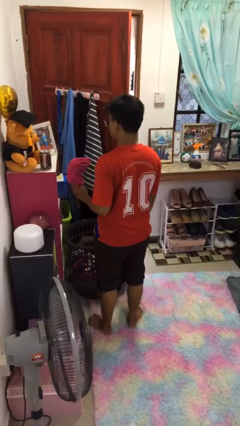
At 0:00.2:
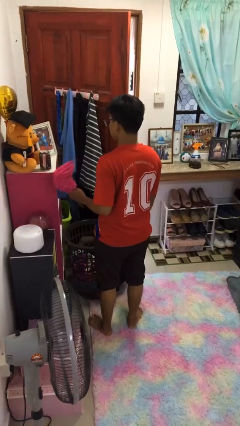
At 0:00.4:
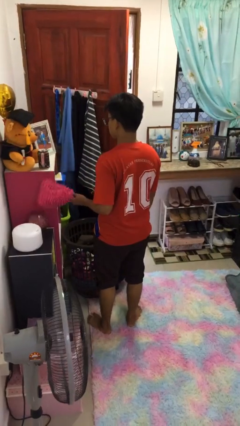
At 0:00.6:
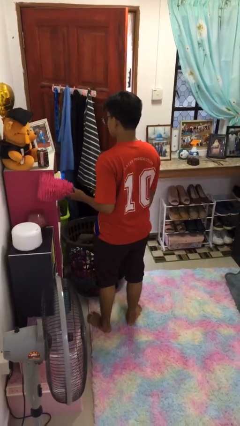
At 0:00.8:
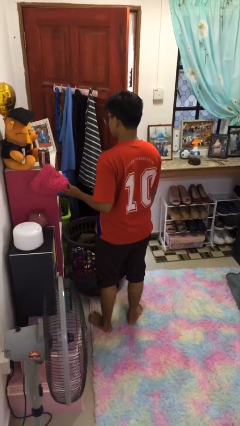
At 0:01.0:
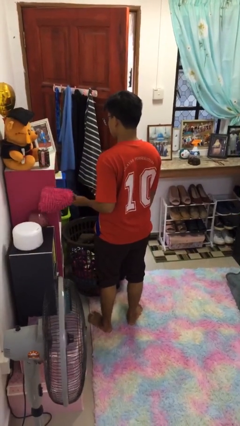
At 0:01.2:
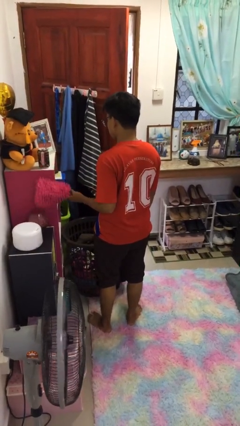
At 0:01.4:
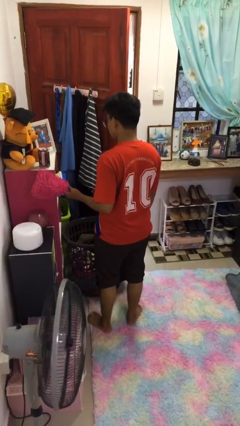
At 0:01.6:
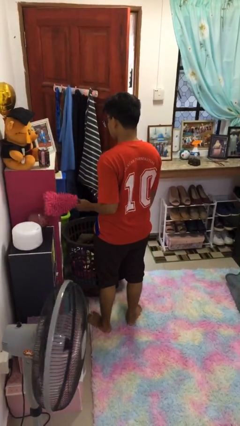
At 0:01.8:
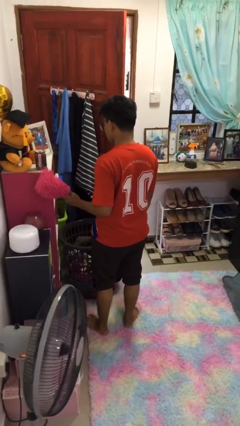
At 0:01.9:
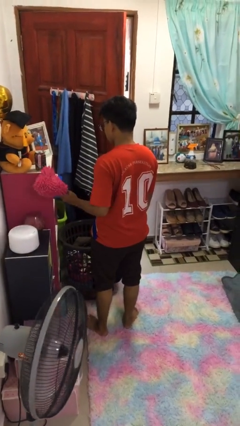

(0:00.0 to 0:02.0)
person dusts furniture

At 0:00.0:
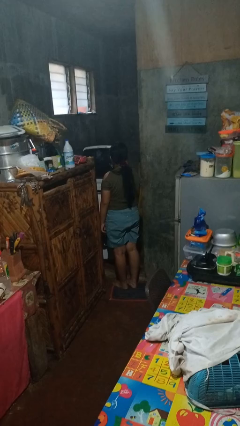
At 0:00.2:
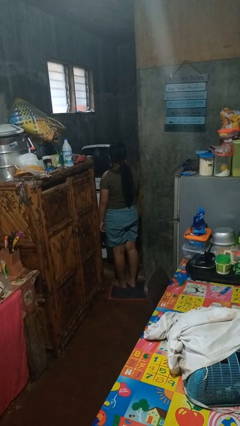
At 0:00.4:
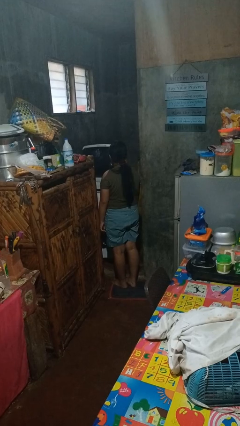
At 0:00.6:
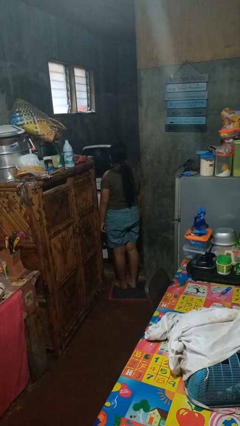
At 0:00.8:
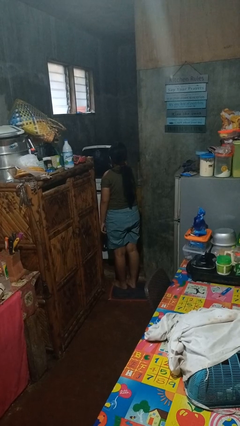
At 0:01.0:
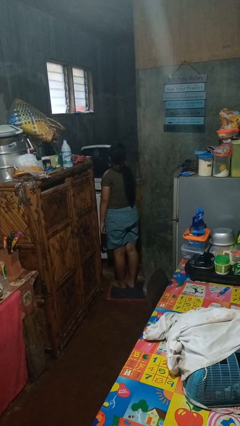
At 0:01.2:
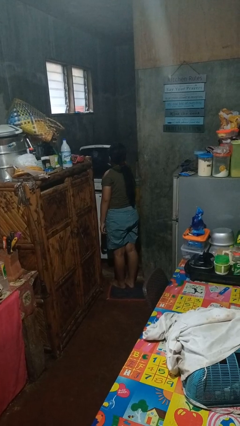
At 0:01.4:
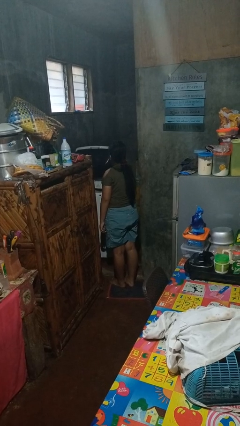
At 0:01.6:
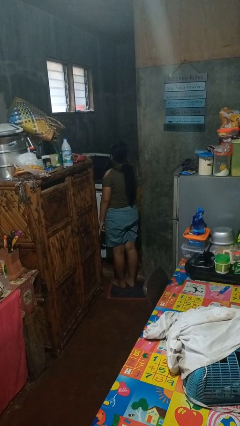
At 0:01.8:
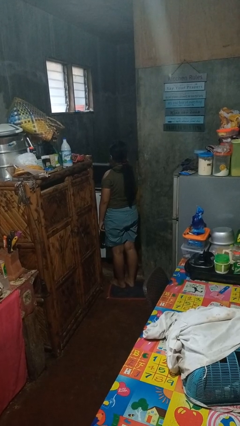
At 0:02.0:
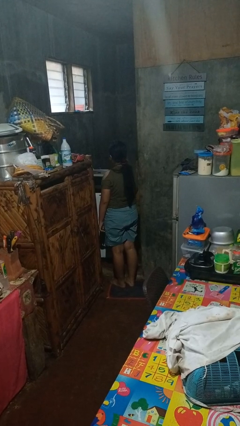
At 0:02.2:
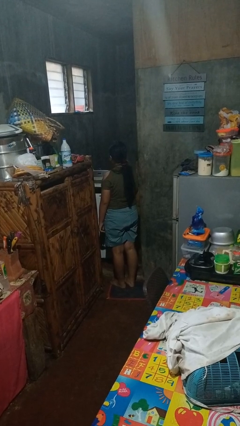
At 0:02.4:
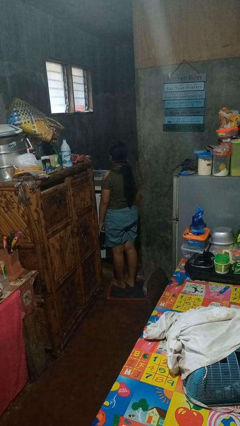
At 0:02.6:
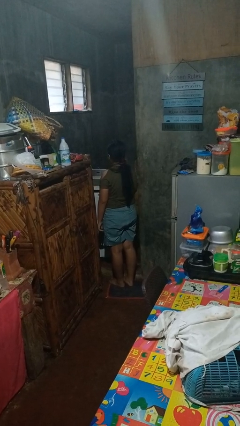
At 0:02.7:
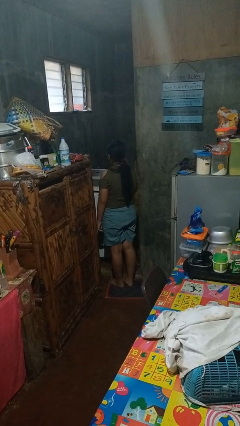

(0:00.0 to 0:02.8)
person closes clothes washer

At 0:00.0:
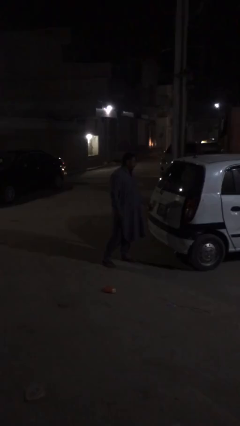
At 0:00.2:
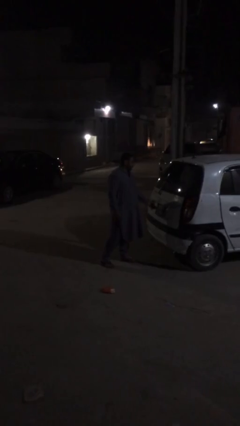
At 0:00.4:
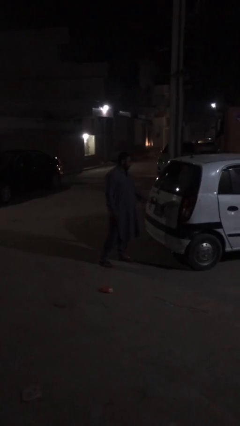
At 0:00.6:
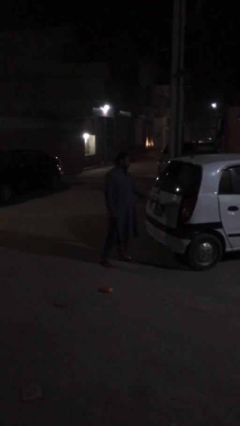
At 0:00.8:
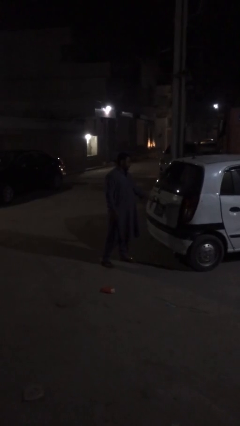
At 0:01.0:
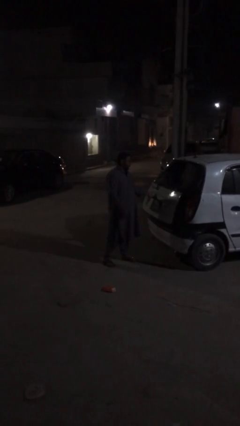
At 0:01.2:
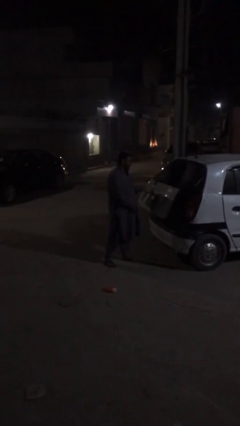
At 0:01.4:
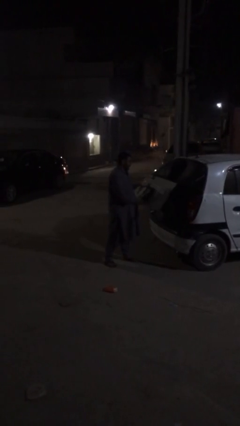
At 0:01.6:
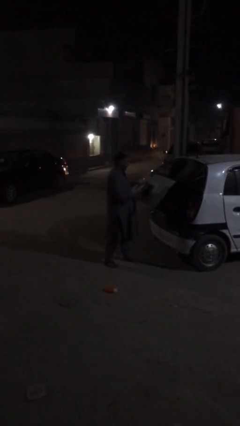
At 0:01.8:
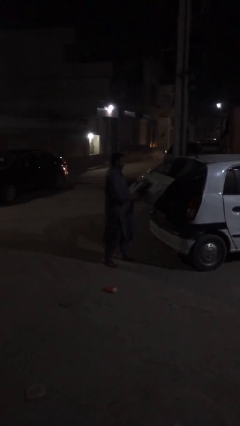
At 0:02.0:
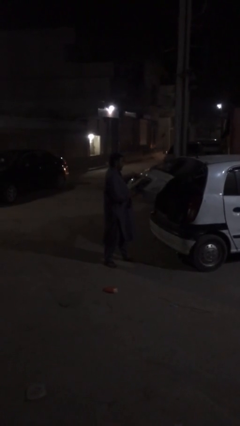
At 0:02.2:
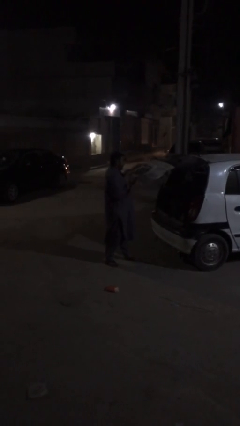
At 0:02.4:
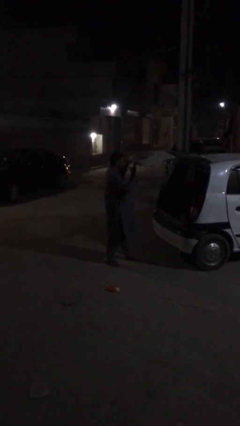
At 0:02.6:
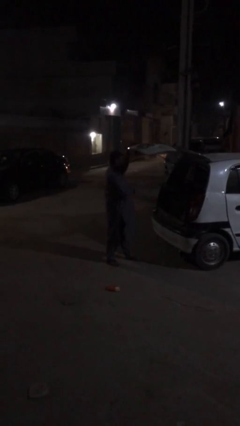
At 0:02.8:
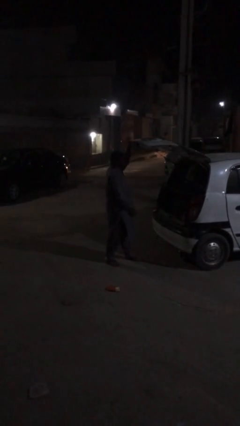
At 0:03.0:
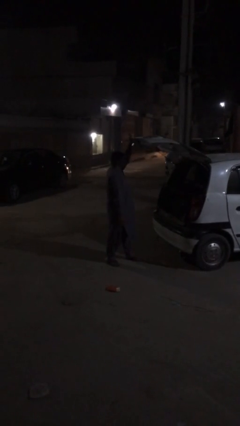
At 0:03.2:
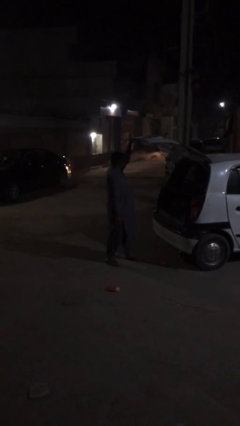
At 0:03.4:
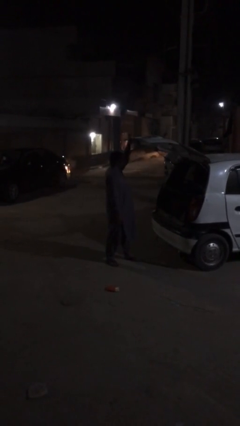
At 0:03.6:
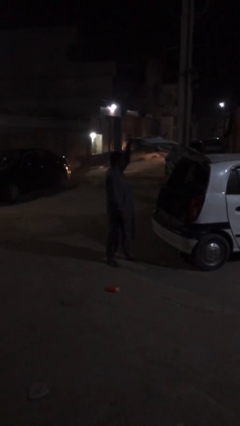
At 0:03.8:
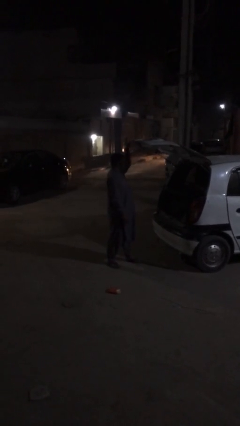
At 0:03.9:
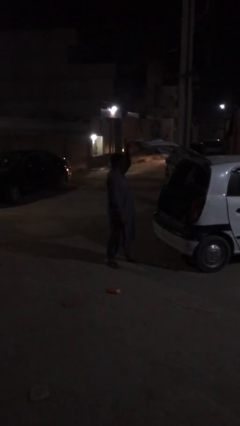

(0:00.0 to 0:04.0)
person opens car trunk

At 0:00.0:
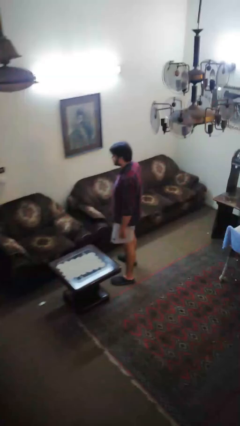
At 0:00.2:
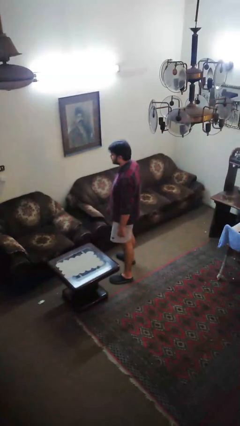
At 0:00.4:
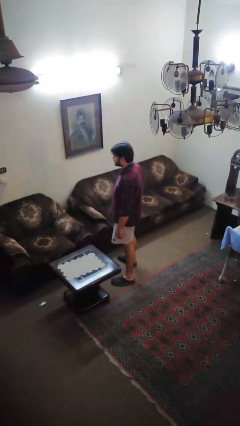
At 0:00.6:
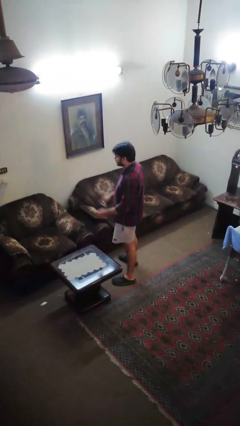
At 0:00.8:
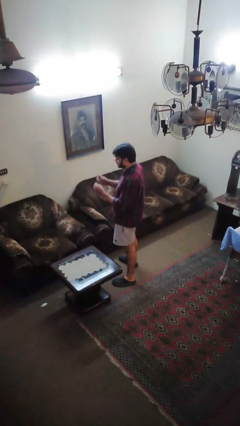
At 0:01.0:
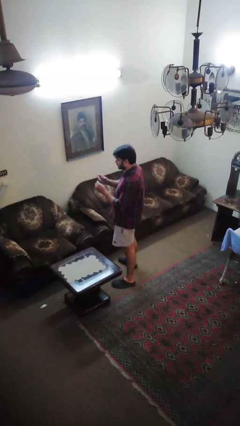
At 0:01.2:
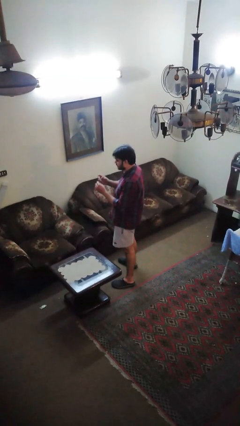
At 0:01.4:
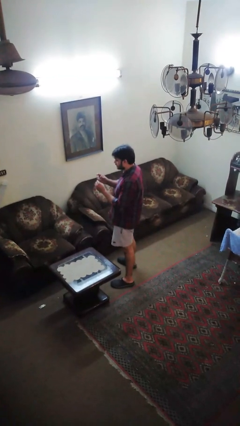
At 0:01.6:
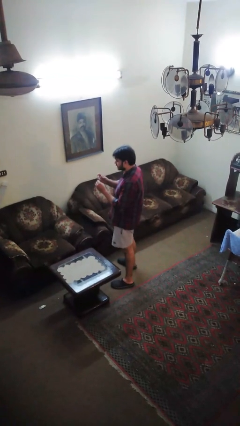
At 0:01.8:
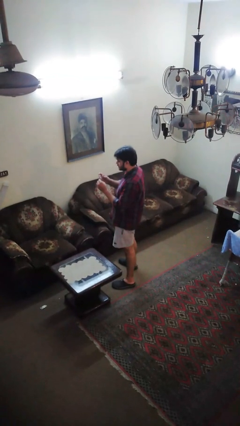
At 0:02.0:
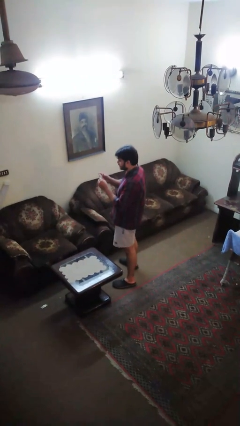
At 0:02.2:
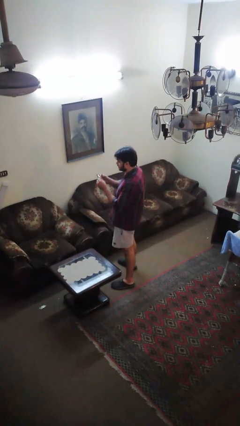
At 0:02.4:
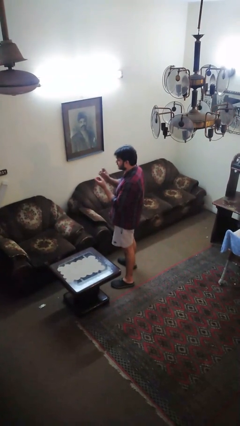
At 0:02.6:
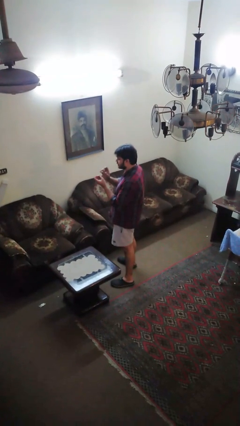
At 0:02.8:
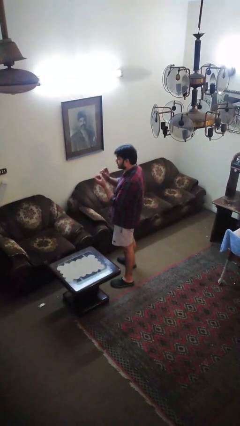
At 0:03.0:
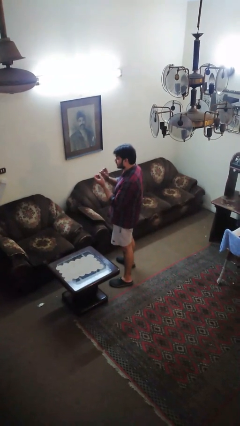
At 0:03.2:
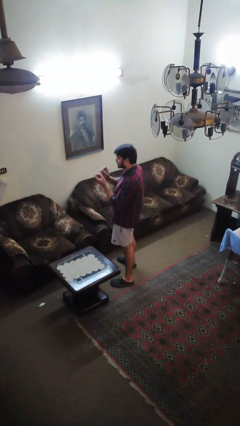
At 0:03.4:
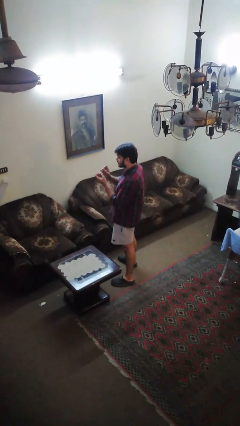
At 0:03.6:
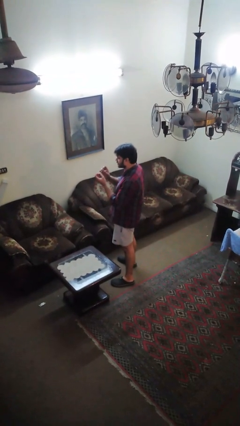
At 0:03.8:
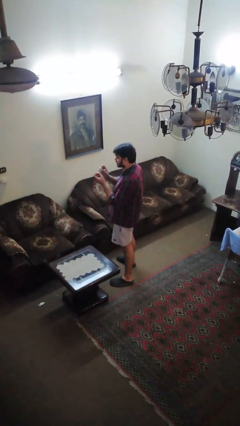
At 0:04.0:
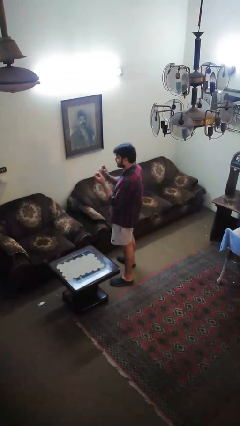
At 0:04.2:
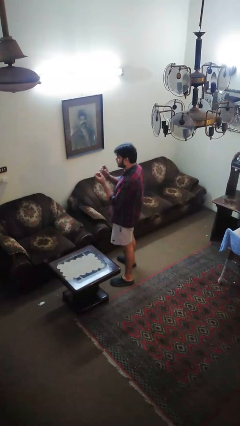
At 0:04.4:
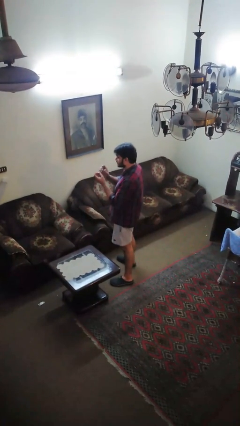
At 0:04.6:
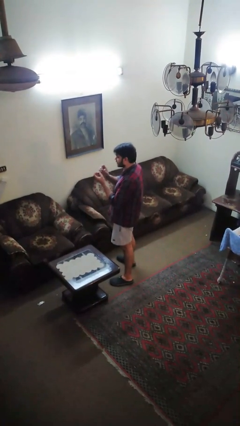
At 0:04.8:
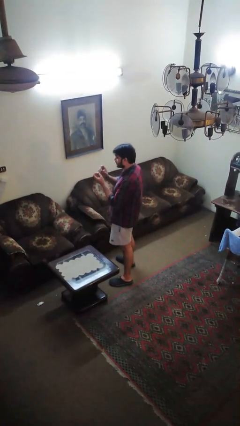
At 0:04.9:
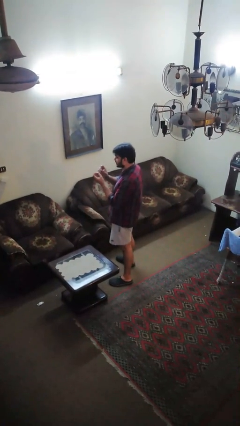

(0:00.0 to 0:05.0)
person clips fingernails

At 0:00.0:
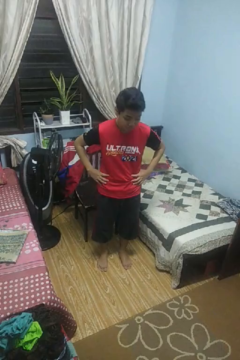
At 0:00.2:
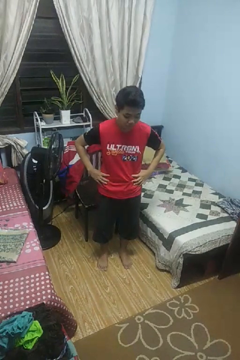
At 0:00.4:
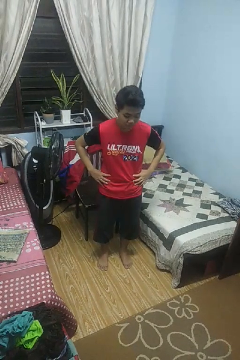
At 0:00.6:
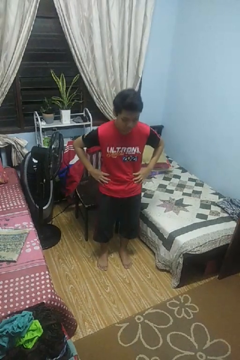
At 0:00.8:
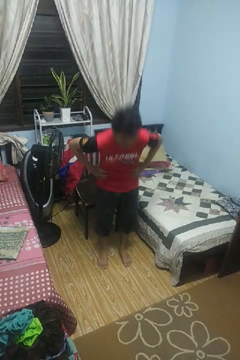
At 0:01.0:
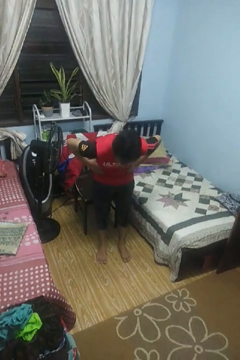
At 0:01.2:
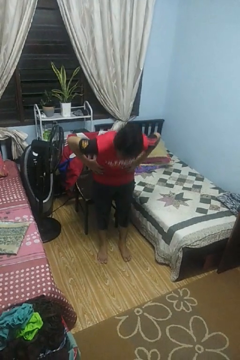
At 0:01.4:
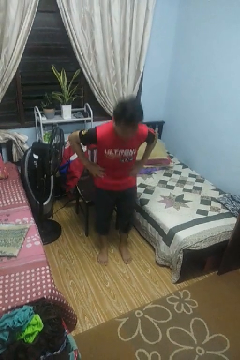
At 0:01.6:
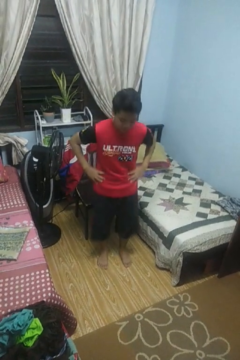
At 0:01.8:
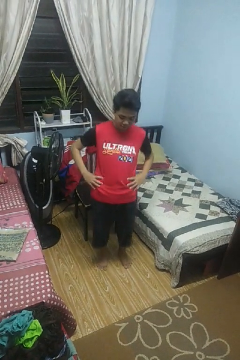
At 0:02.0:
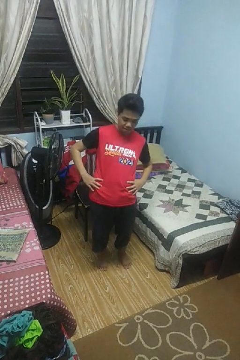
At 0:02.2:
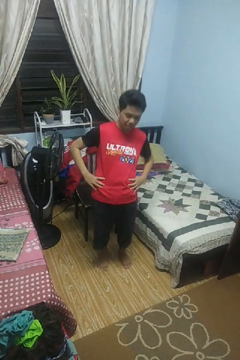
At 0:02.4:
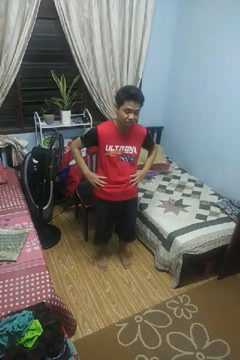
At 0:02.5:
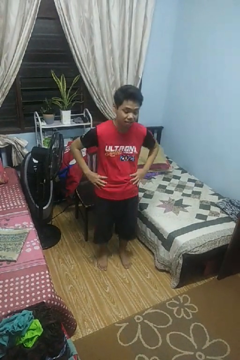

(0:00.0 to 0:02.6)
person wiggles hips

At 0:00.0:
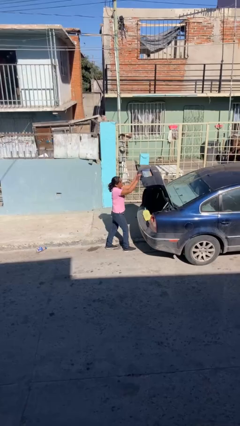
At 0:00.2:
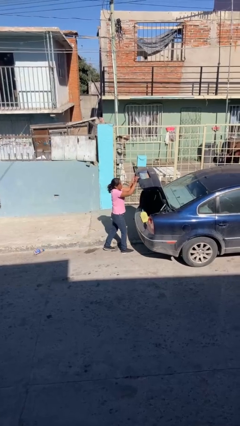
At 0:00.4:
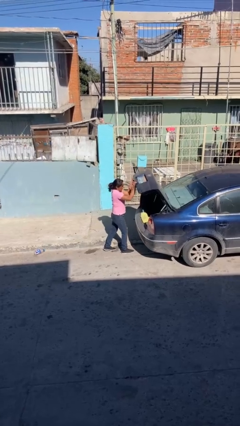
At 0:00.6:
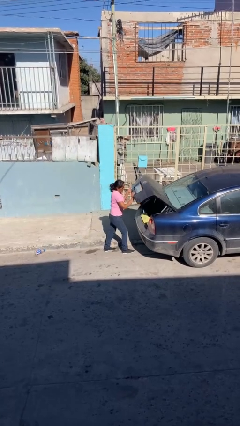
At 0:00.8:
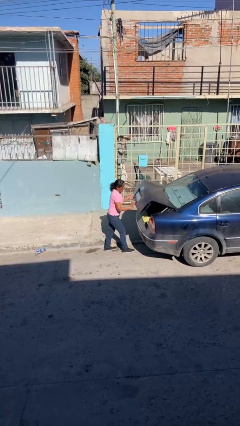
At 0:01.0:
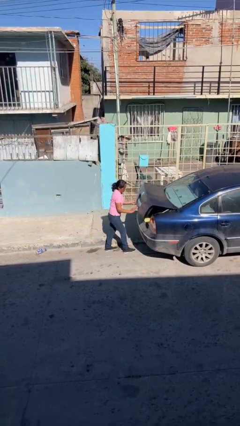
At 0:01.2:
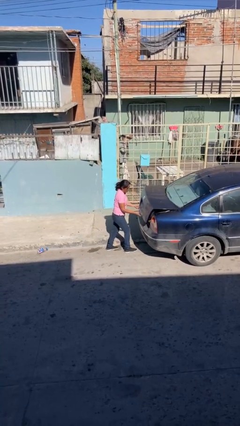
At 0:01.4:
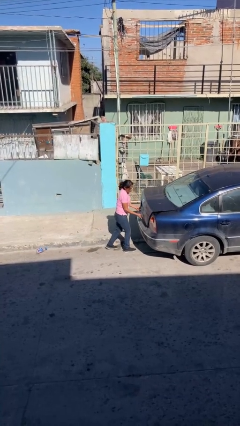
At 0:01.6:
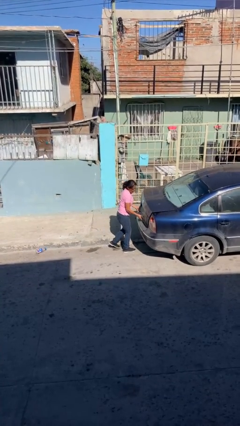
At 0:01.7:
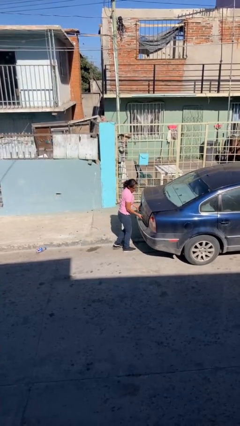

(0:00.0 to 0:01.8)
person closes car trunk
